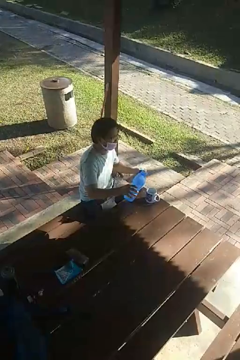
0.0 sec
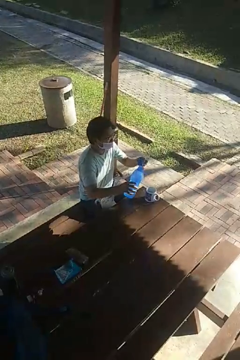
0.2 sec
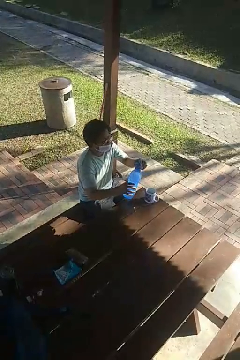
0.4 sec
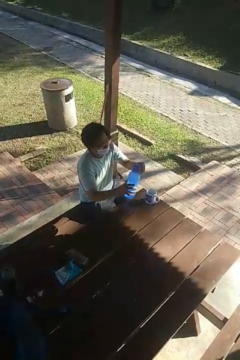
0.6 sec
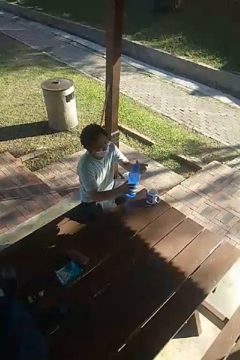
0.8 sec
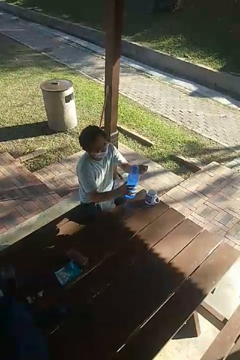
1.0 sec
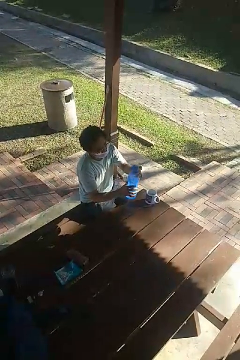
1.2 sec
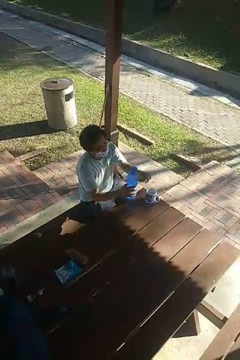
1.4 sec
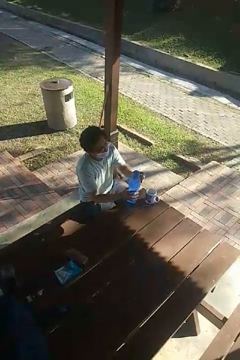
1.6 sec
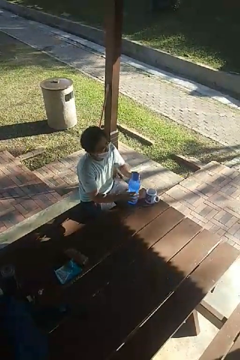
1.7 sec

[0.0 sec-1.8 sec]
person screws lid to bottle

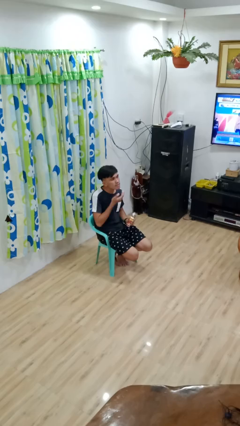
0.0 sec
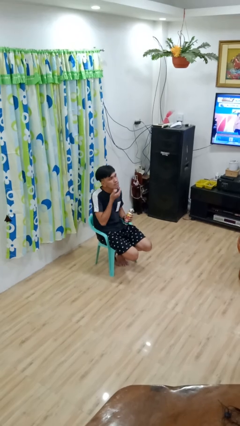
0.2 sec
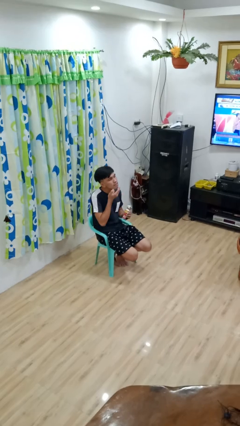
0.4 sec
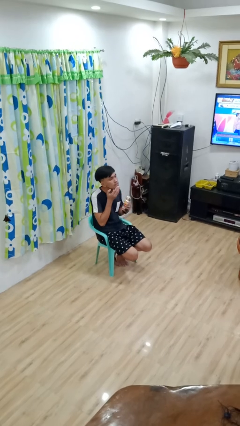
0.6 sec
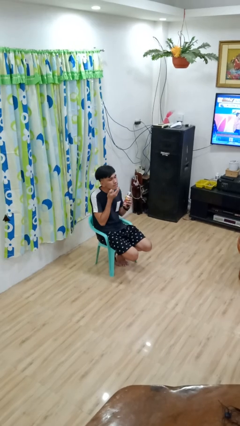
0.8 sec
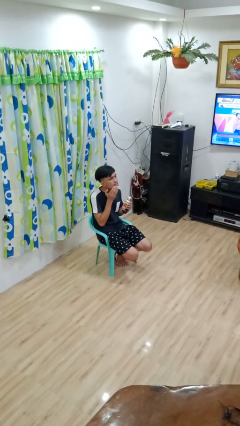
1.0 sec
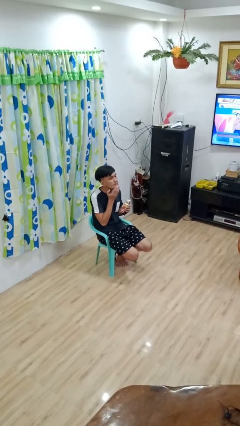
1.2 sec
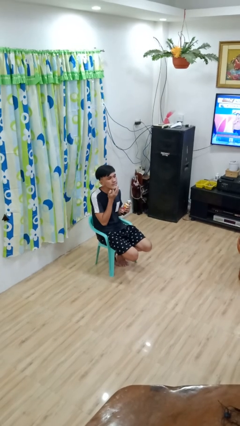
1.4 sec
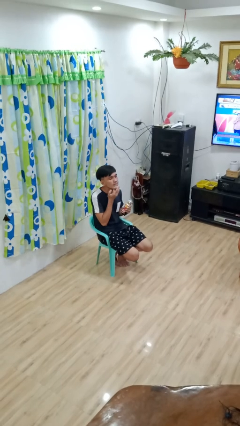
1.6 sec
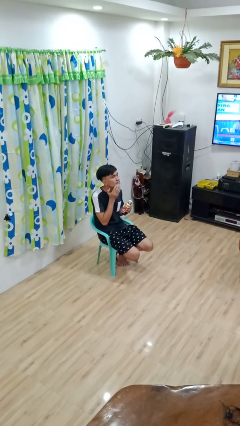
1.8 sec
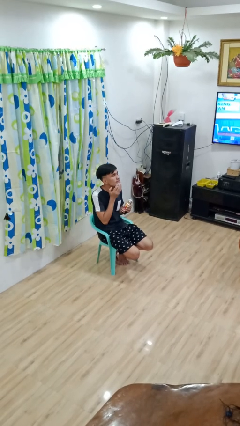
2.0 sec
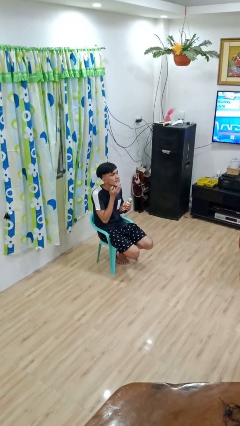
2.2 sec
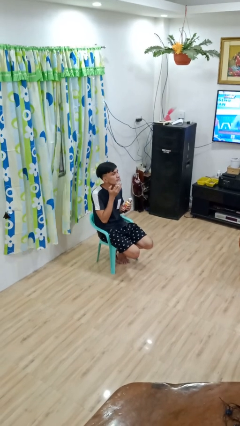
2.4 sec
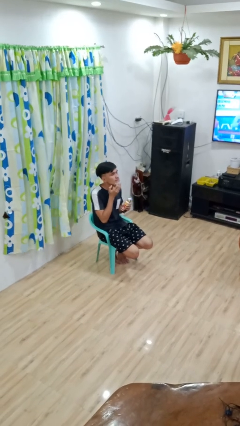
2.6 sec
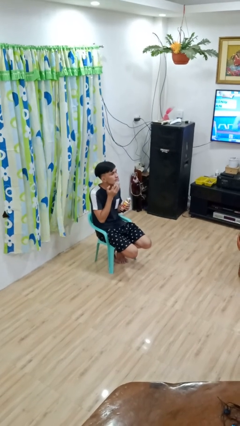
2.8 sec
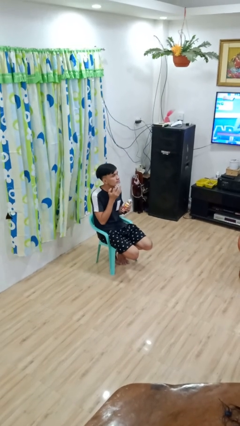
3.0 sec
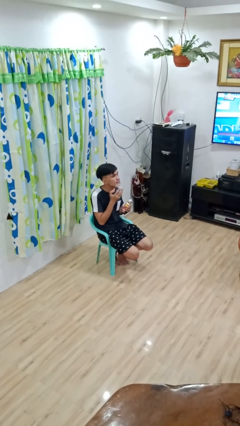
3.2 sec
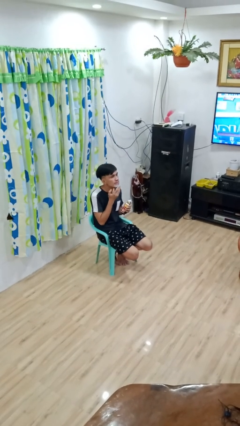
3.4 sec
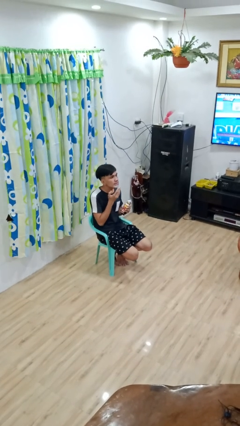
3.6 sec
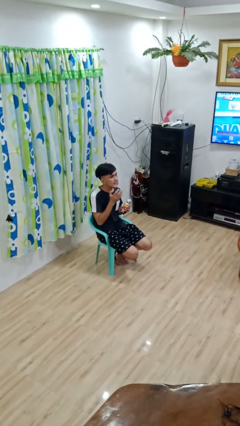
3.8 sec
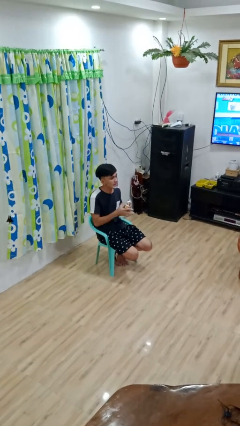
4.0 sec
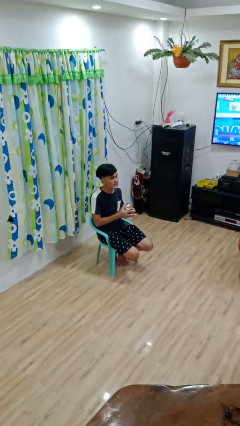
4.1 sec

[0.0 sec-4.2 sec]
person applies shaving cream

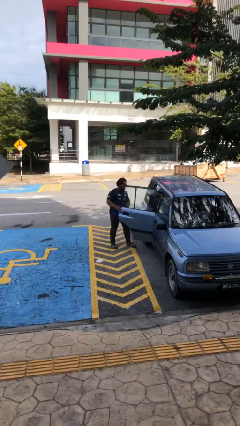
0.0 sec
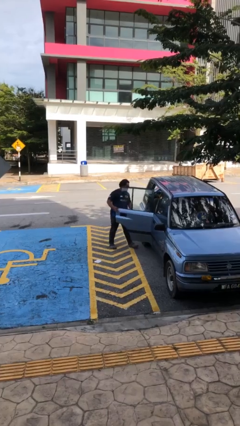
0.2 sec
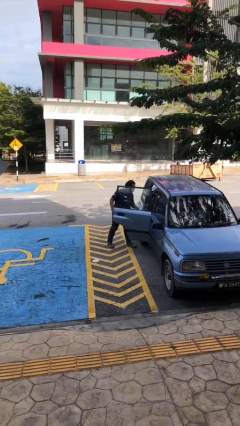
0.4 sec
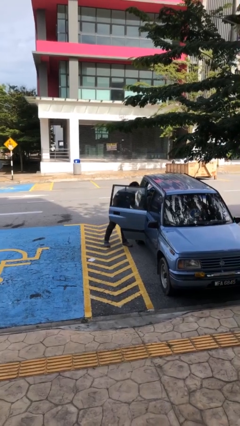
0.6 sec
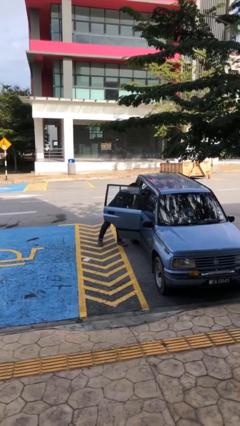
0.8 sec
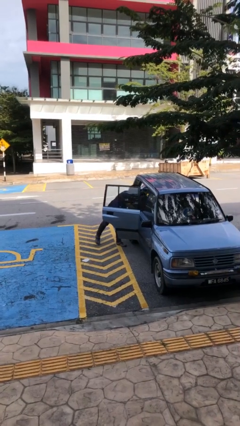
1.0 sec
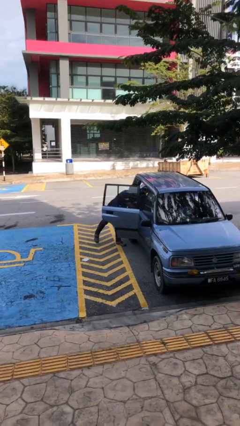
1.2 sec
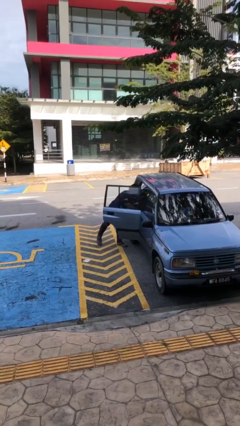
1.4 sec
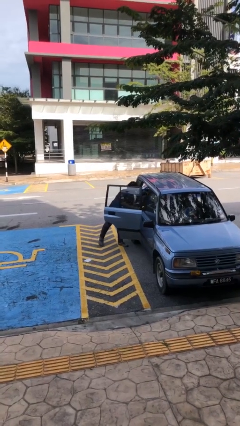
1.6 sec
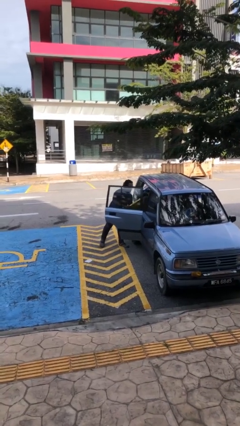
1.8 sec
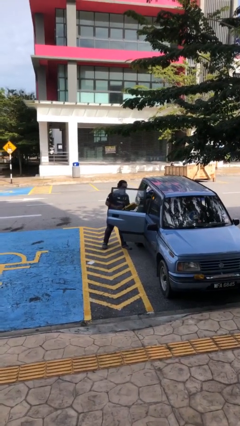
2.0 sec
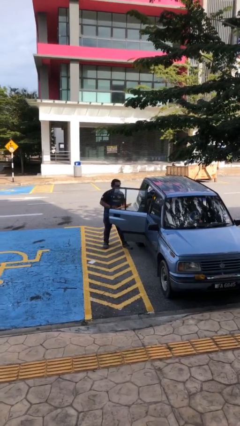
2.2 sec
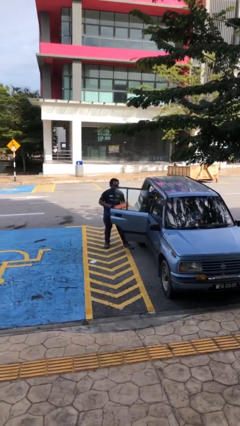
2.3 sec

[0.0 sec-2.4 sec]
person unloads car

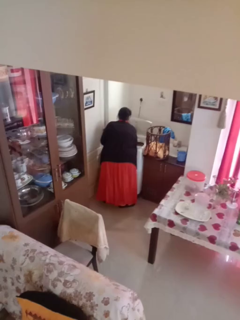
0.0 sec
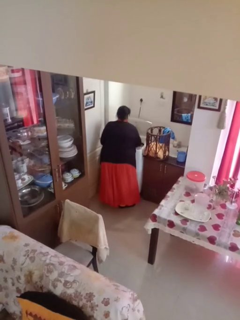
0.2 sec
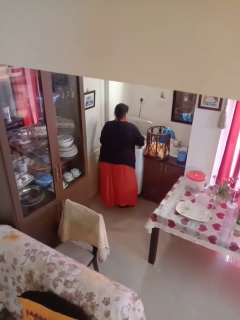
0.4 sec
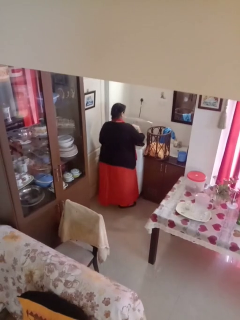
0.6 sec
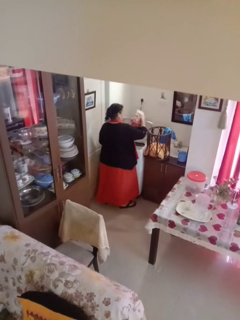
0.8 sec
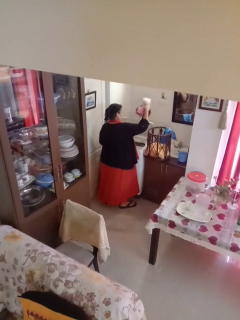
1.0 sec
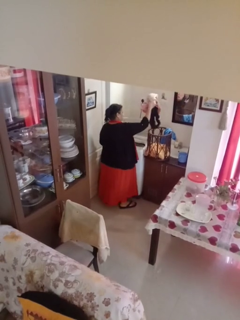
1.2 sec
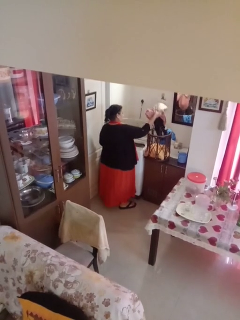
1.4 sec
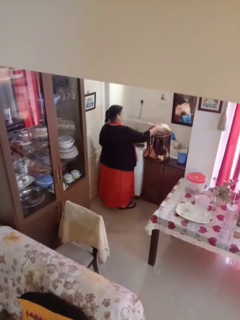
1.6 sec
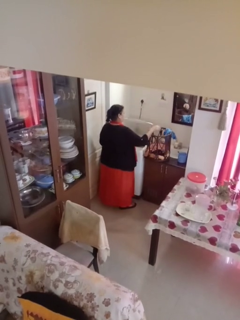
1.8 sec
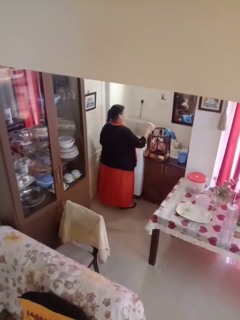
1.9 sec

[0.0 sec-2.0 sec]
person loads clotheswasher

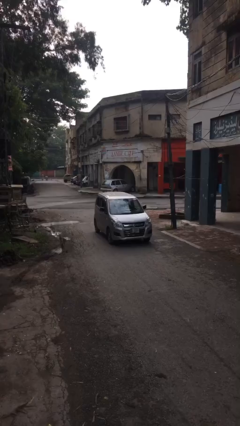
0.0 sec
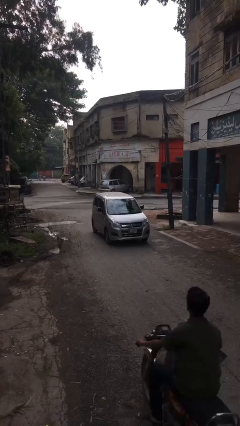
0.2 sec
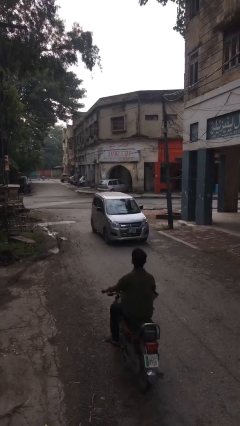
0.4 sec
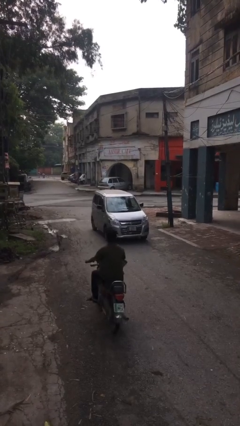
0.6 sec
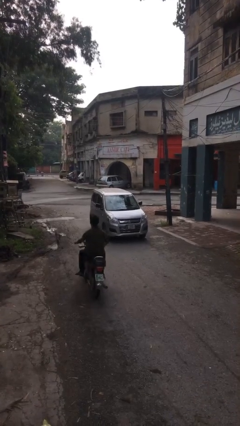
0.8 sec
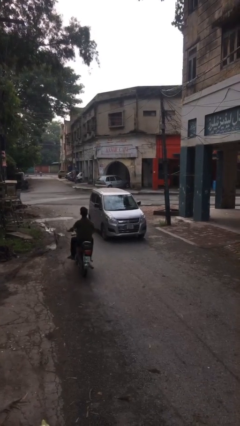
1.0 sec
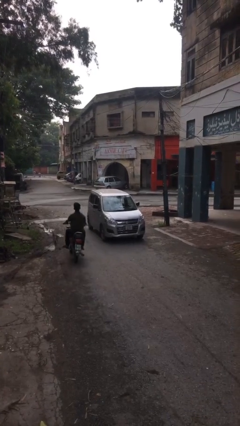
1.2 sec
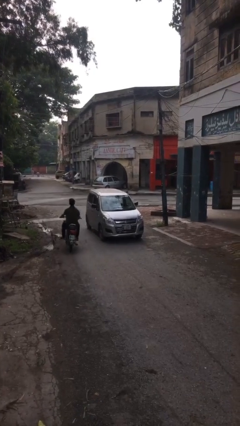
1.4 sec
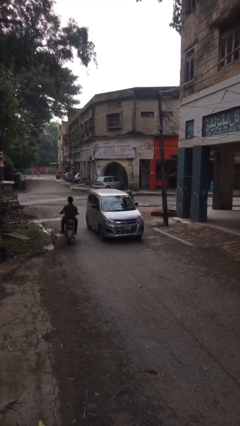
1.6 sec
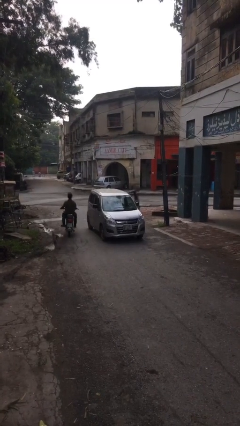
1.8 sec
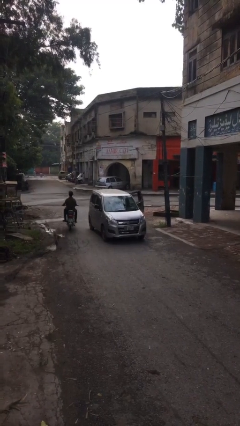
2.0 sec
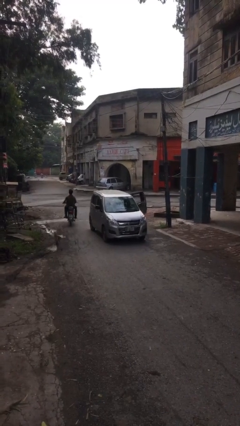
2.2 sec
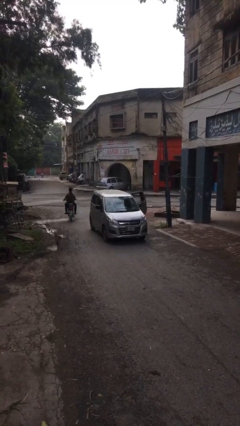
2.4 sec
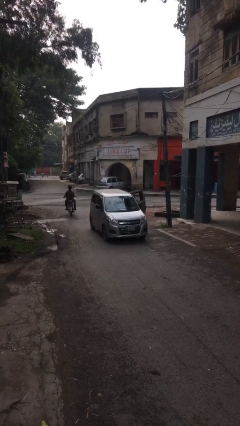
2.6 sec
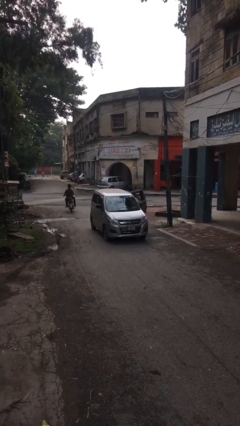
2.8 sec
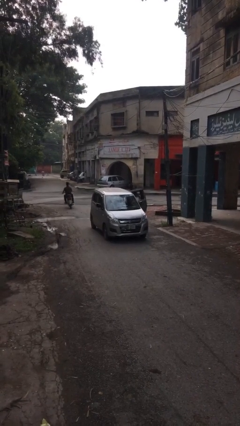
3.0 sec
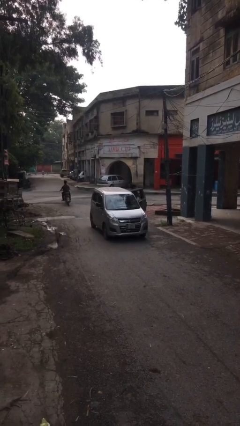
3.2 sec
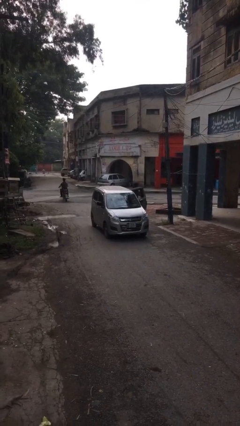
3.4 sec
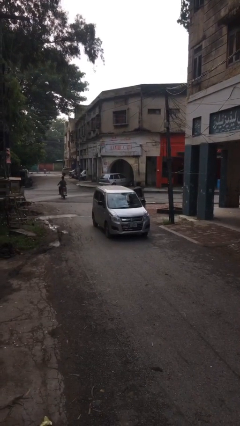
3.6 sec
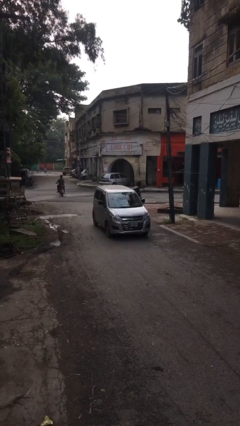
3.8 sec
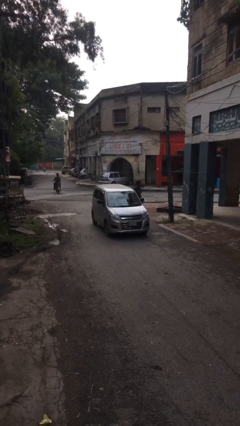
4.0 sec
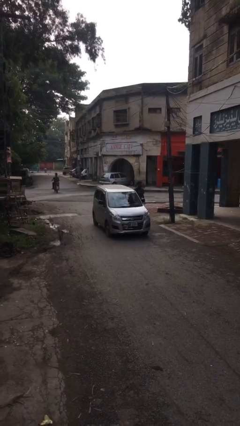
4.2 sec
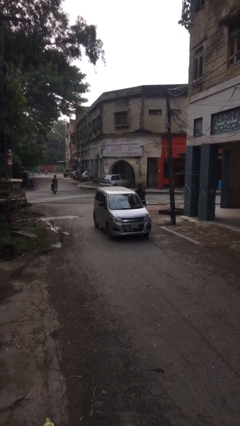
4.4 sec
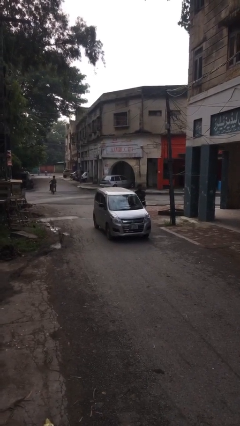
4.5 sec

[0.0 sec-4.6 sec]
car drops off person

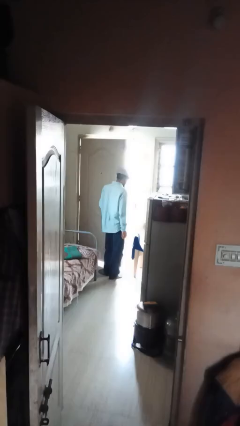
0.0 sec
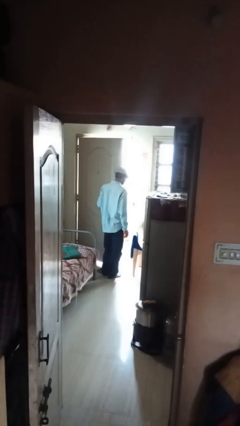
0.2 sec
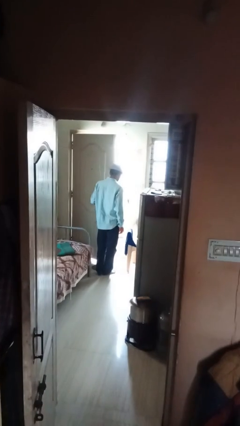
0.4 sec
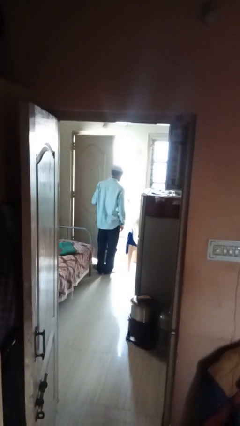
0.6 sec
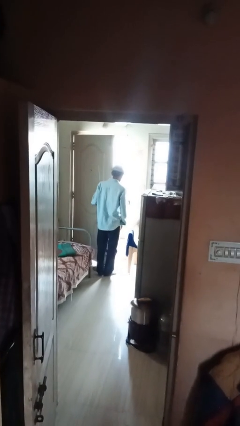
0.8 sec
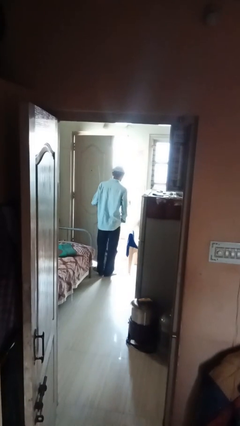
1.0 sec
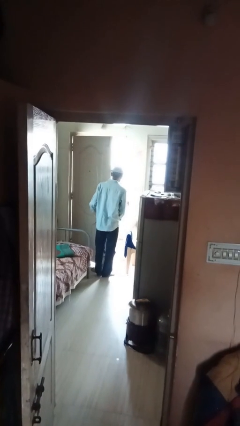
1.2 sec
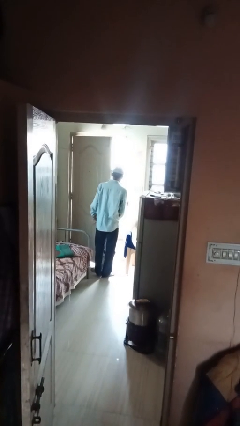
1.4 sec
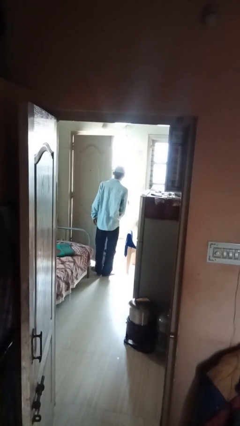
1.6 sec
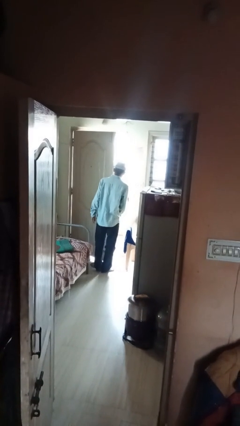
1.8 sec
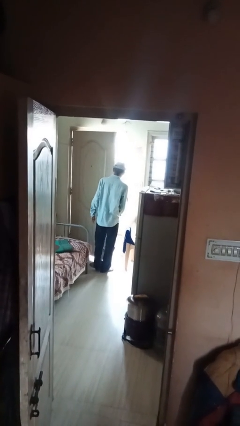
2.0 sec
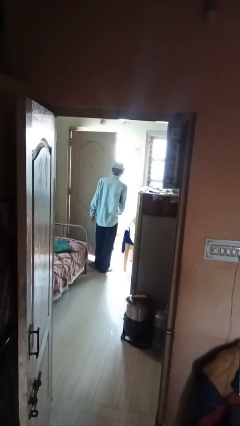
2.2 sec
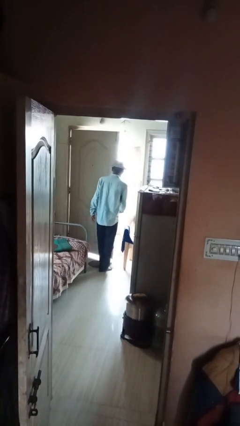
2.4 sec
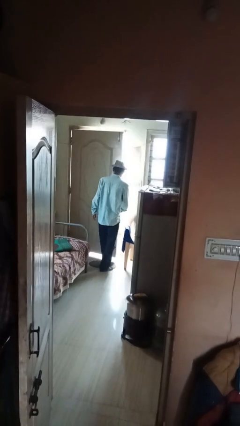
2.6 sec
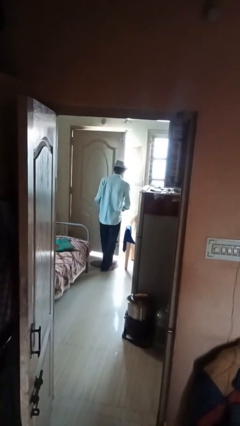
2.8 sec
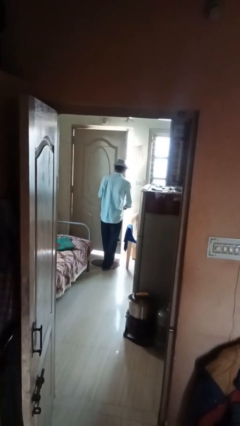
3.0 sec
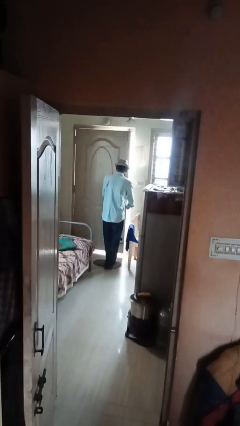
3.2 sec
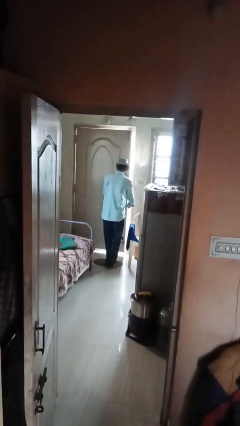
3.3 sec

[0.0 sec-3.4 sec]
person opens facility door
